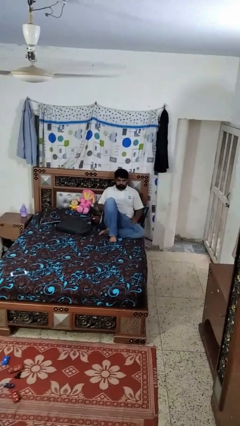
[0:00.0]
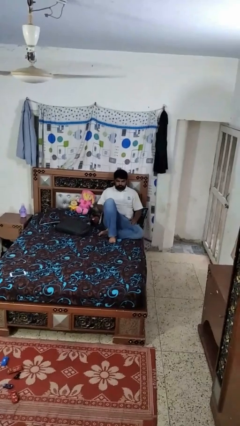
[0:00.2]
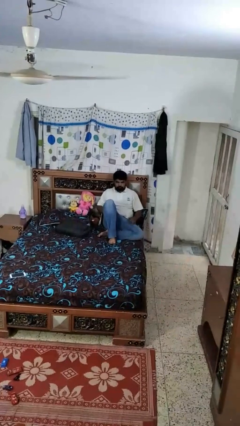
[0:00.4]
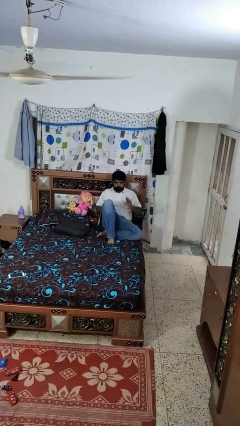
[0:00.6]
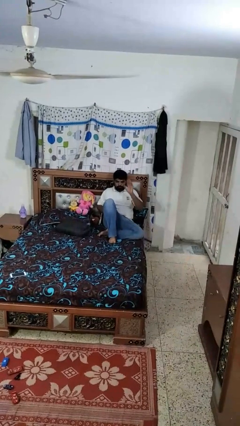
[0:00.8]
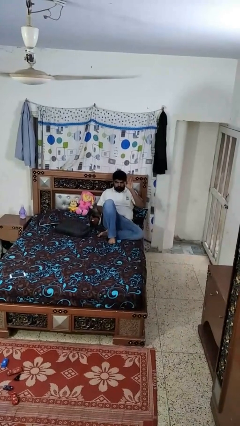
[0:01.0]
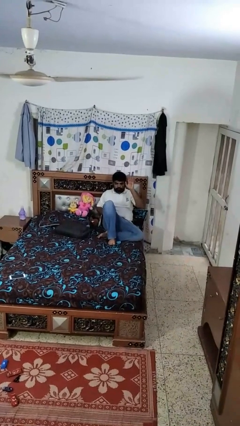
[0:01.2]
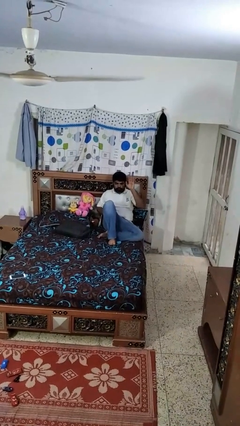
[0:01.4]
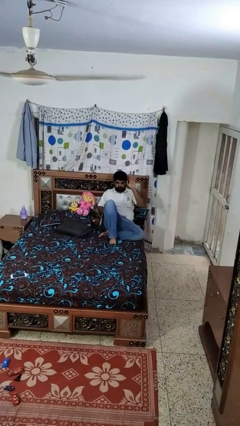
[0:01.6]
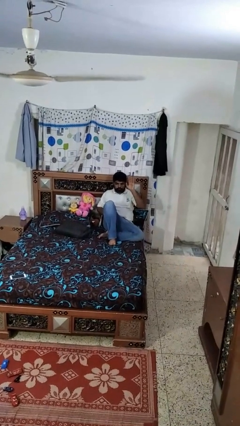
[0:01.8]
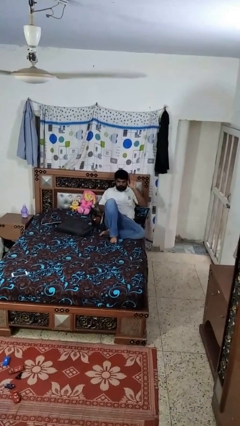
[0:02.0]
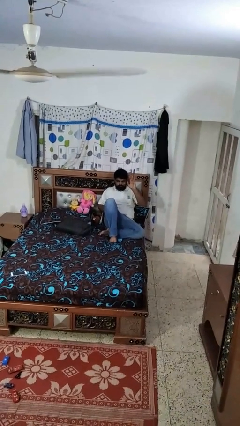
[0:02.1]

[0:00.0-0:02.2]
person gestures raise hand

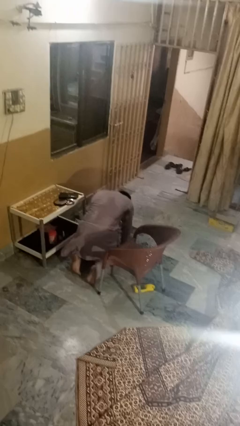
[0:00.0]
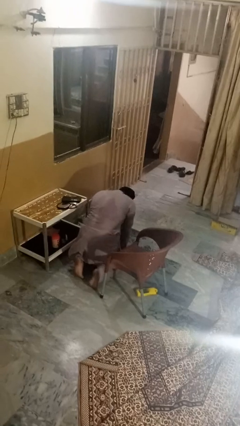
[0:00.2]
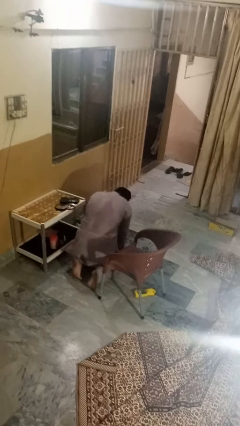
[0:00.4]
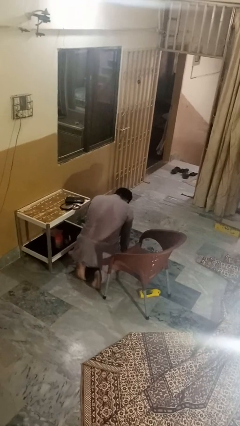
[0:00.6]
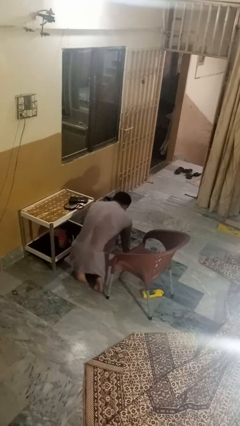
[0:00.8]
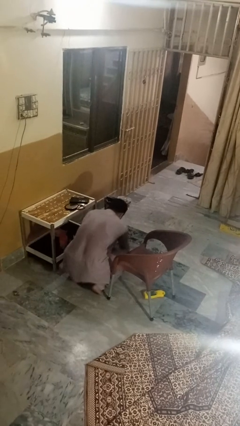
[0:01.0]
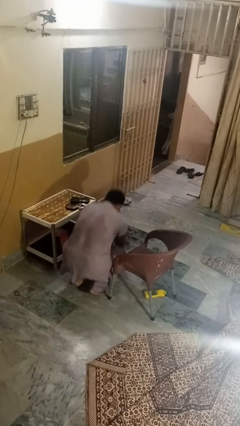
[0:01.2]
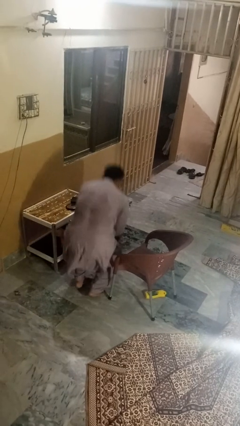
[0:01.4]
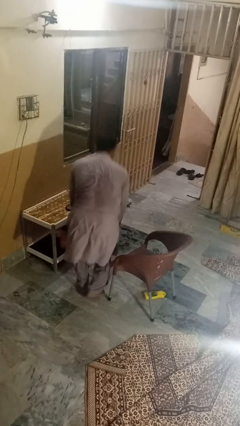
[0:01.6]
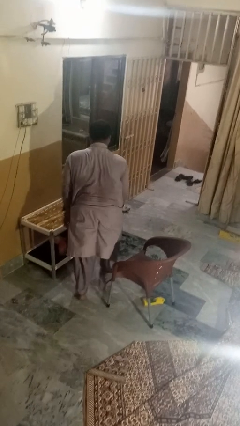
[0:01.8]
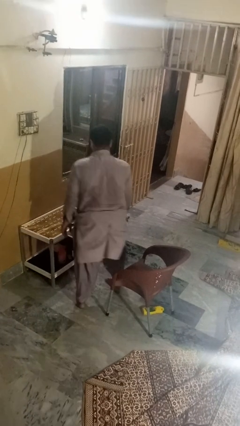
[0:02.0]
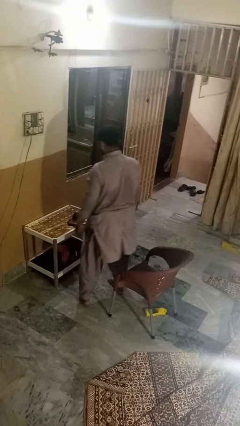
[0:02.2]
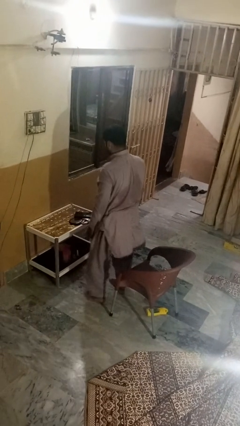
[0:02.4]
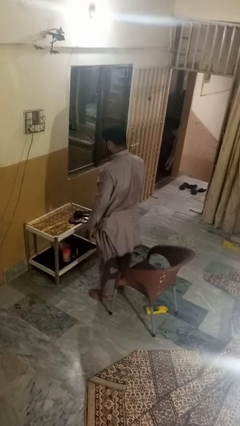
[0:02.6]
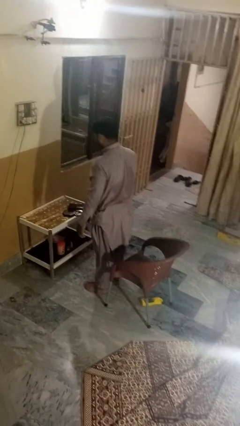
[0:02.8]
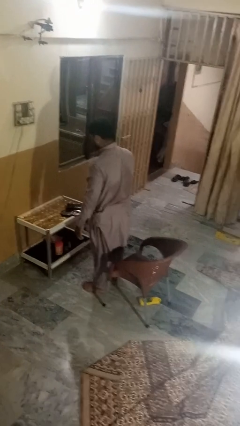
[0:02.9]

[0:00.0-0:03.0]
person stands up from floor

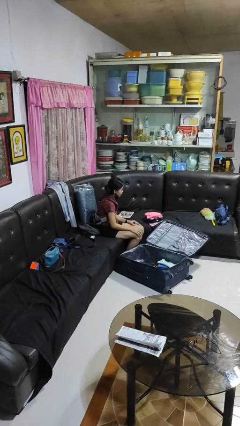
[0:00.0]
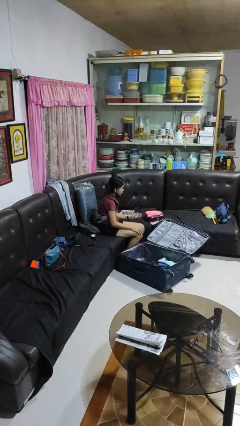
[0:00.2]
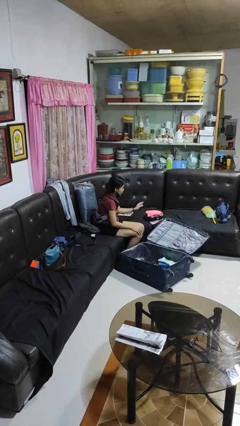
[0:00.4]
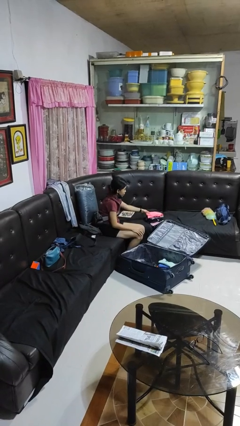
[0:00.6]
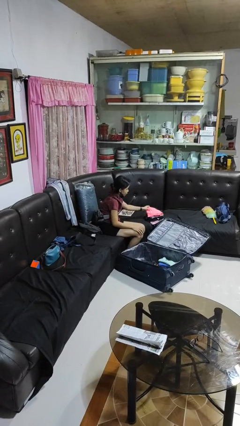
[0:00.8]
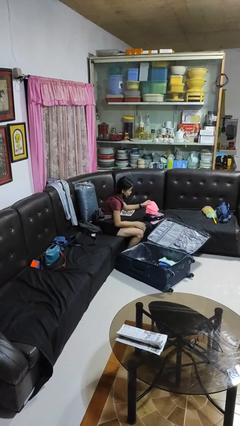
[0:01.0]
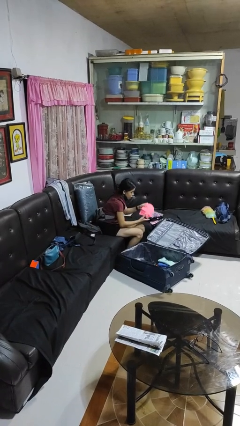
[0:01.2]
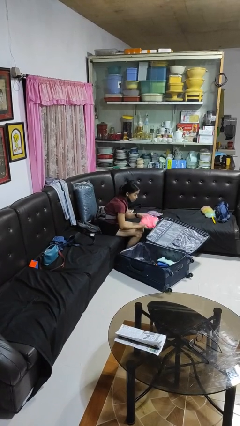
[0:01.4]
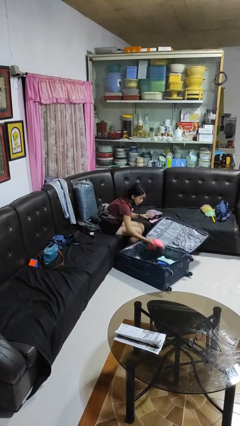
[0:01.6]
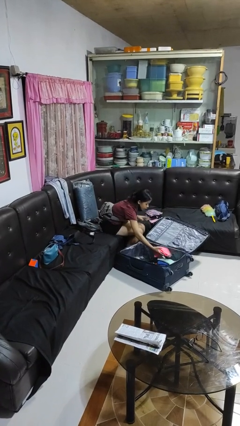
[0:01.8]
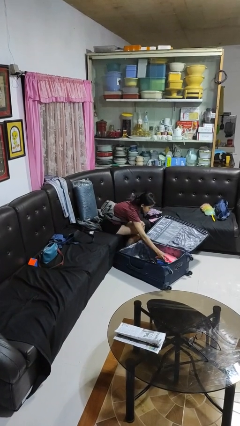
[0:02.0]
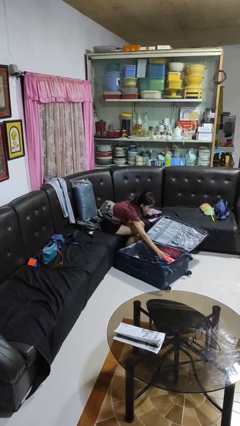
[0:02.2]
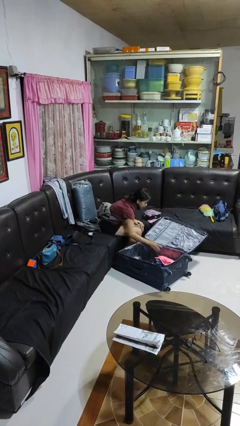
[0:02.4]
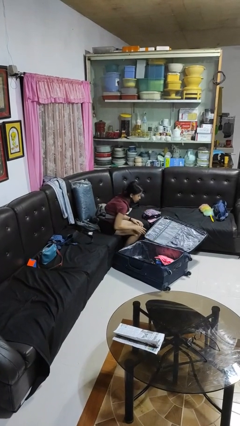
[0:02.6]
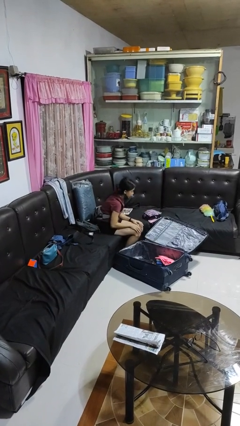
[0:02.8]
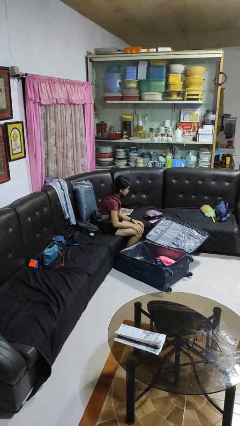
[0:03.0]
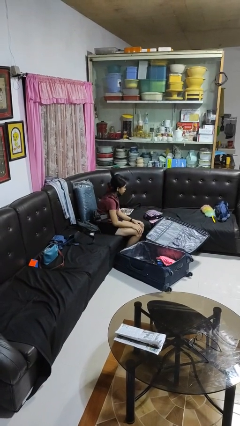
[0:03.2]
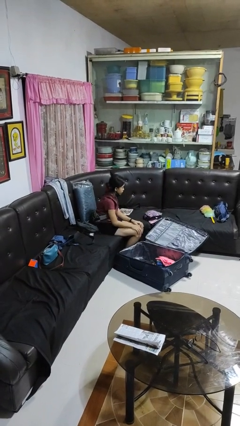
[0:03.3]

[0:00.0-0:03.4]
person loads clothes into suitcase

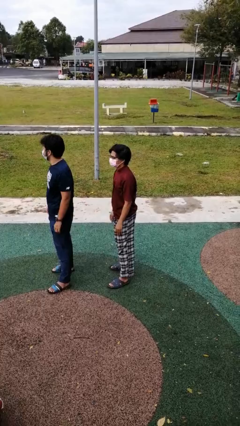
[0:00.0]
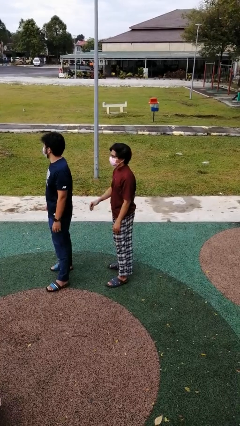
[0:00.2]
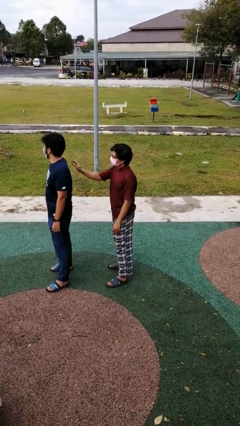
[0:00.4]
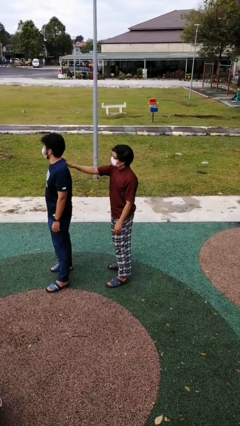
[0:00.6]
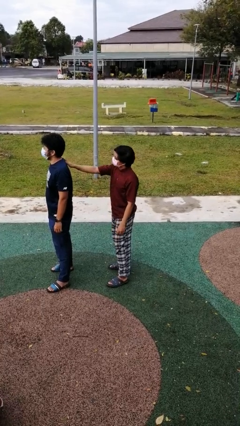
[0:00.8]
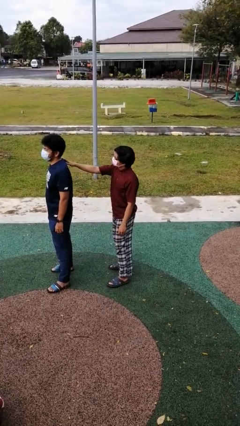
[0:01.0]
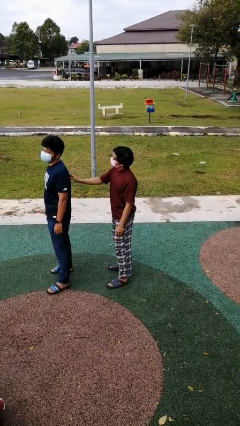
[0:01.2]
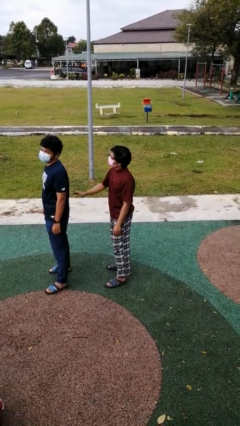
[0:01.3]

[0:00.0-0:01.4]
person touches back of person

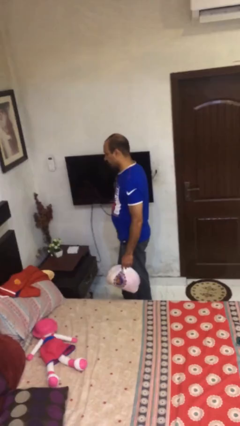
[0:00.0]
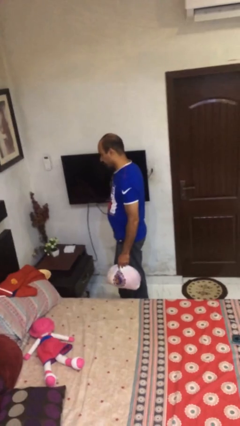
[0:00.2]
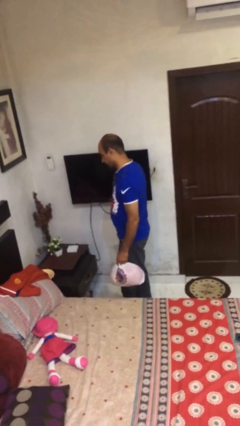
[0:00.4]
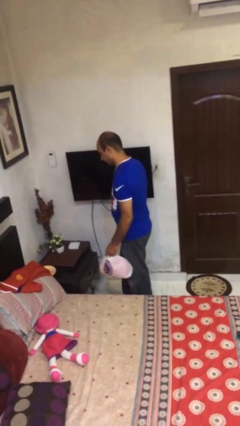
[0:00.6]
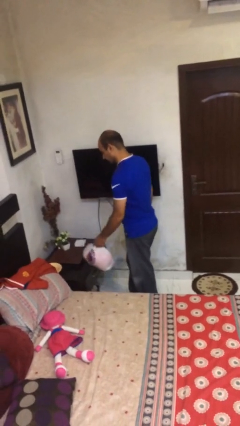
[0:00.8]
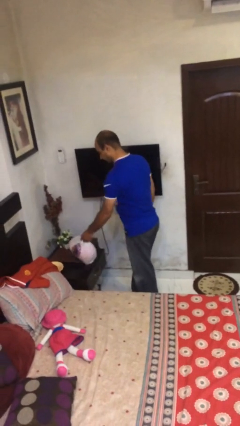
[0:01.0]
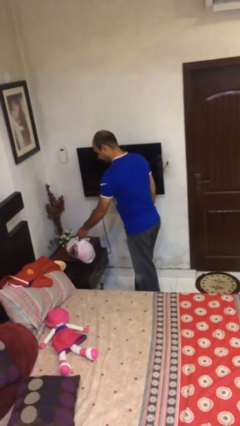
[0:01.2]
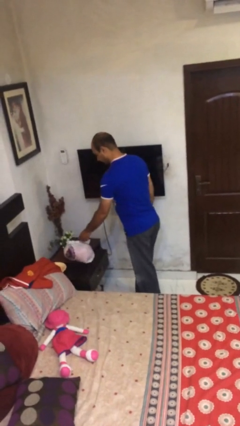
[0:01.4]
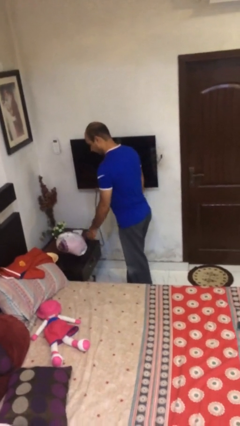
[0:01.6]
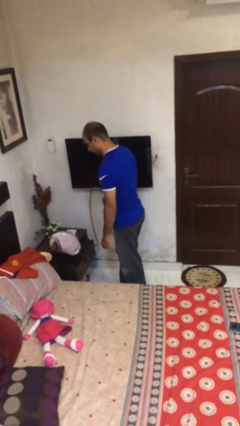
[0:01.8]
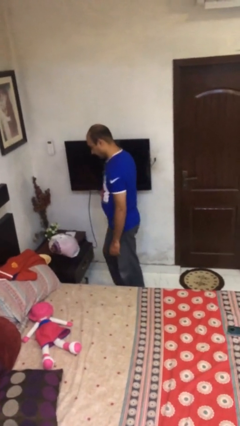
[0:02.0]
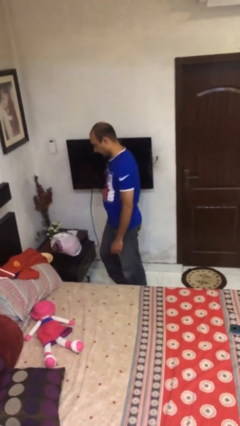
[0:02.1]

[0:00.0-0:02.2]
person puts down object on table

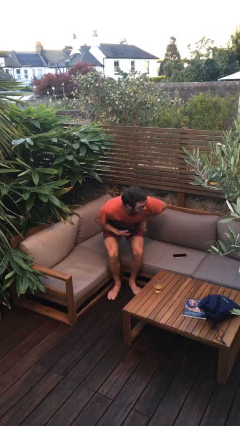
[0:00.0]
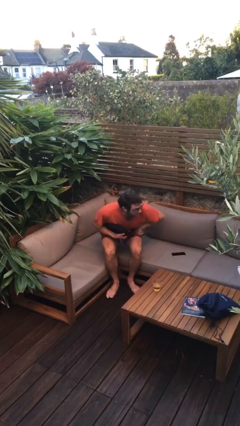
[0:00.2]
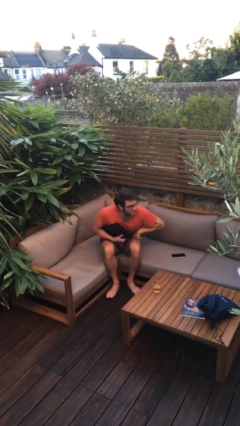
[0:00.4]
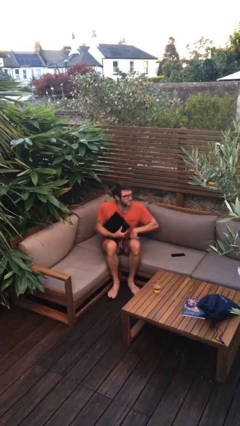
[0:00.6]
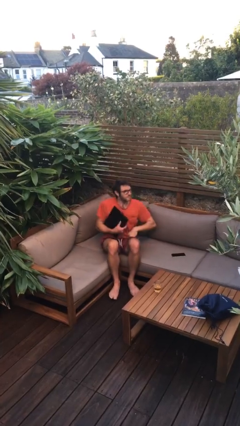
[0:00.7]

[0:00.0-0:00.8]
person sits down

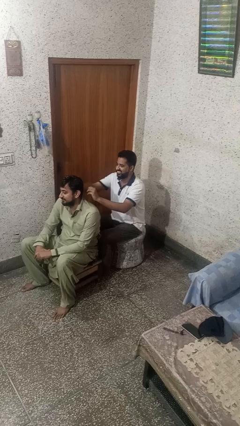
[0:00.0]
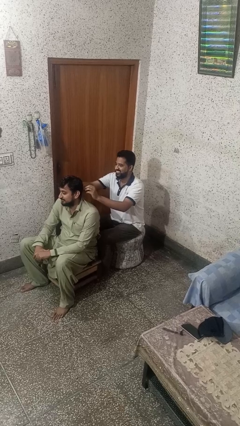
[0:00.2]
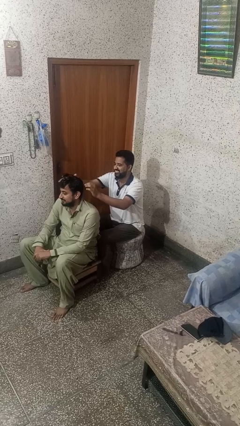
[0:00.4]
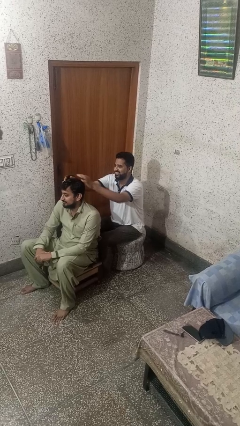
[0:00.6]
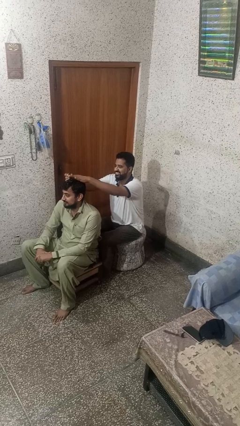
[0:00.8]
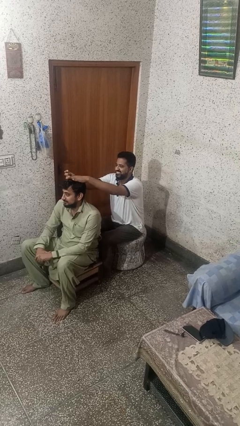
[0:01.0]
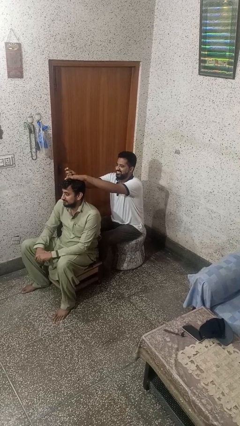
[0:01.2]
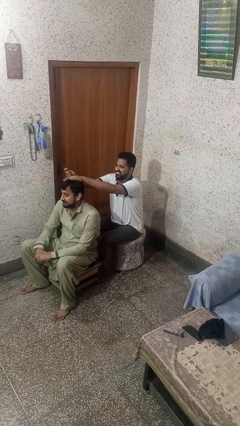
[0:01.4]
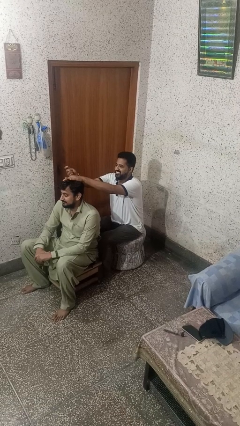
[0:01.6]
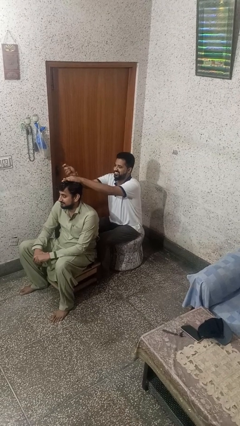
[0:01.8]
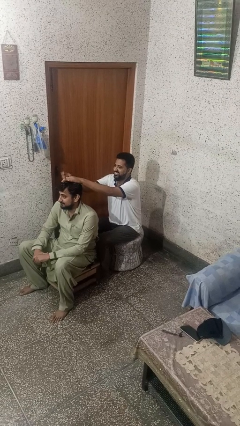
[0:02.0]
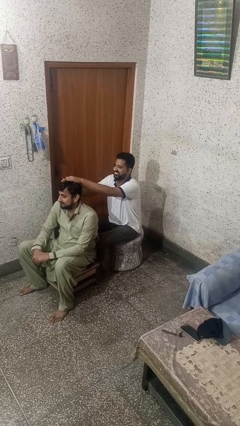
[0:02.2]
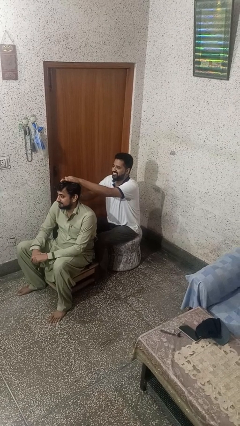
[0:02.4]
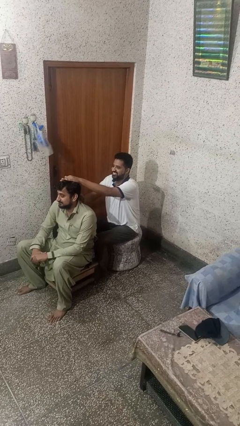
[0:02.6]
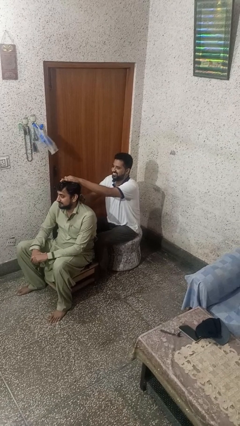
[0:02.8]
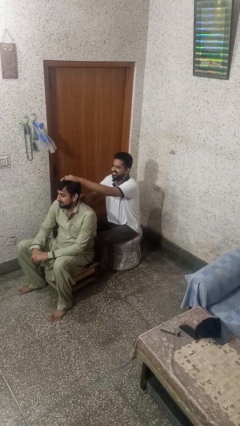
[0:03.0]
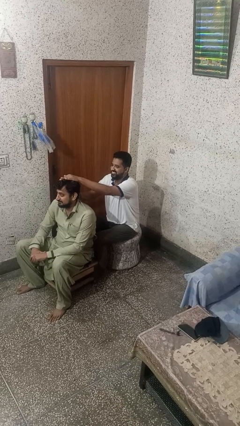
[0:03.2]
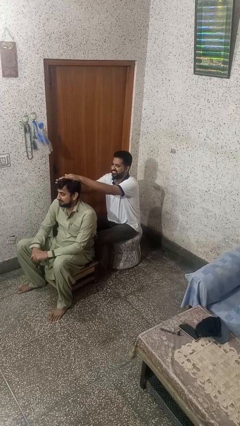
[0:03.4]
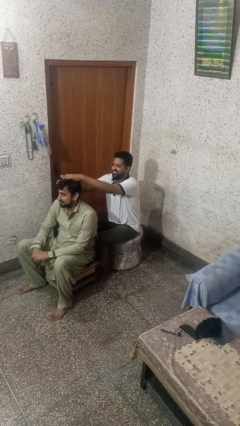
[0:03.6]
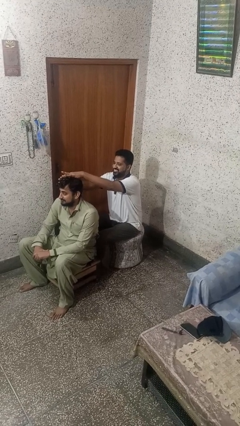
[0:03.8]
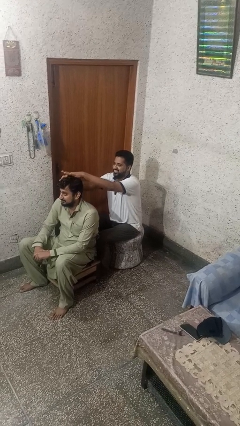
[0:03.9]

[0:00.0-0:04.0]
person braids hair of person
